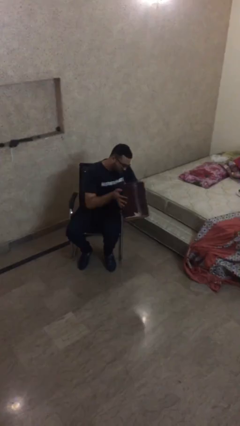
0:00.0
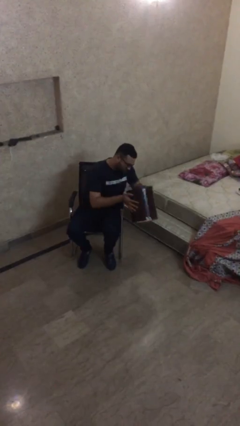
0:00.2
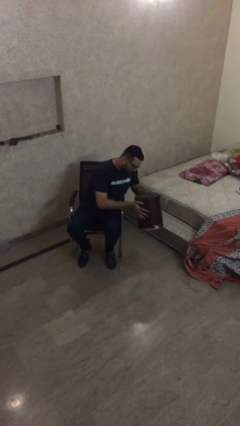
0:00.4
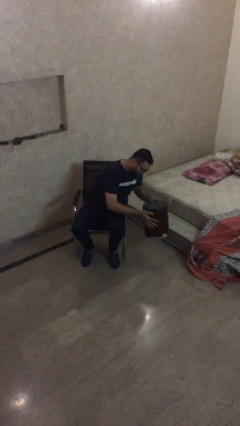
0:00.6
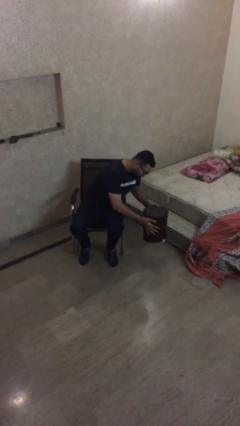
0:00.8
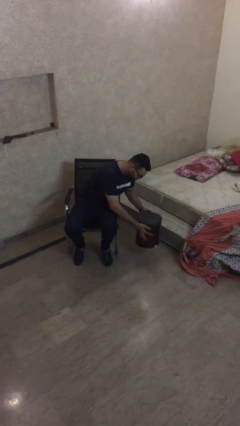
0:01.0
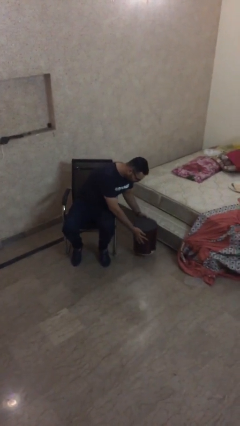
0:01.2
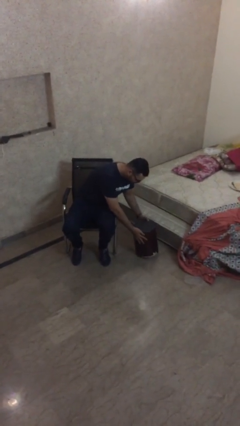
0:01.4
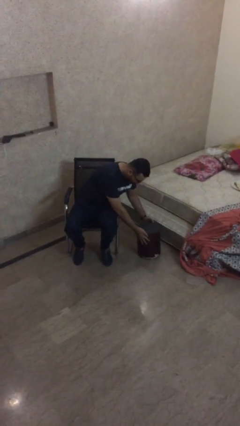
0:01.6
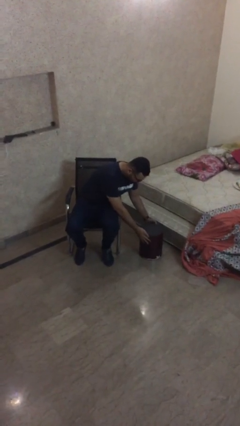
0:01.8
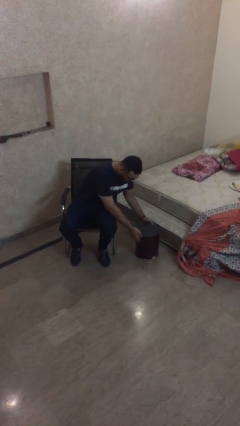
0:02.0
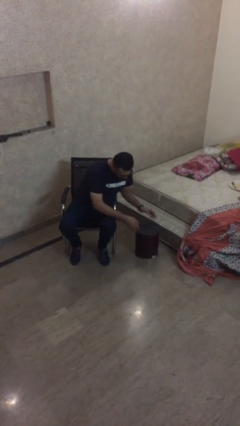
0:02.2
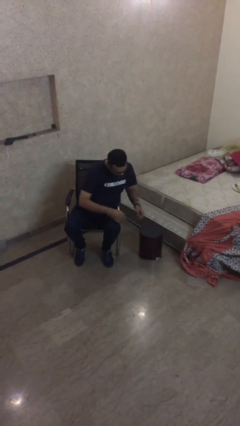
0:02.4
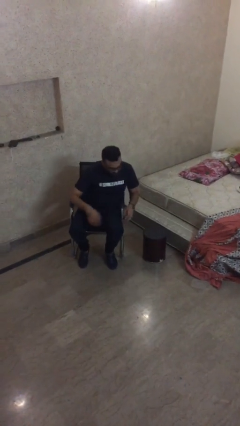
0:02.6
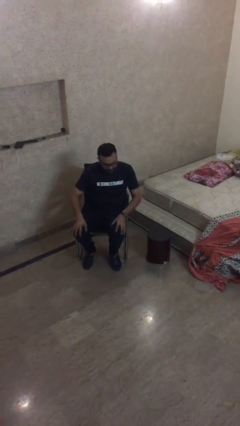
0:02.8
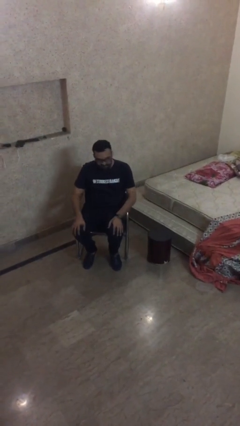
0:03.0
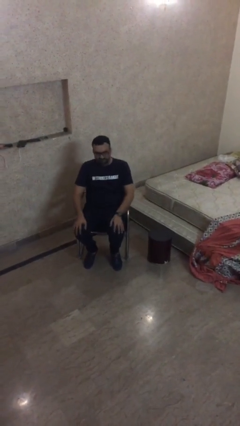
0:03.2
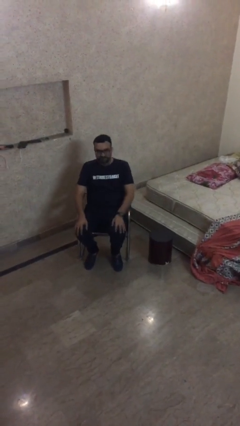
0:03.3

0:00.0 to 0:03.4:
person puts down object on floor

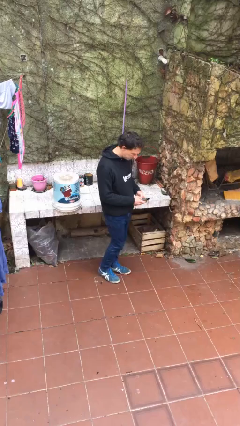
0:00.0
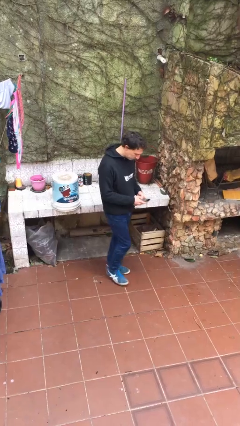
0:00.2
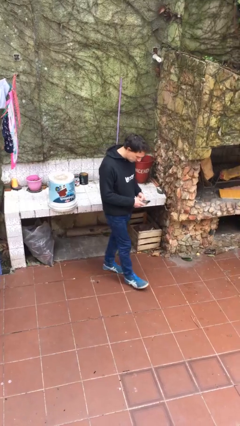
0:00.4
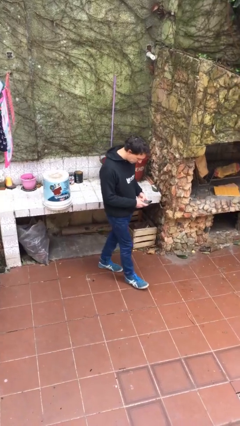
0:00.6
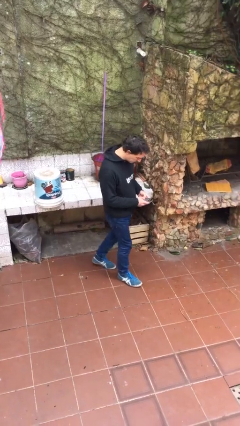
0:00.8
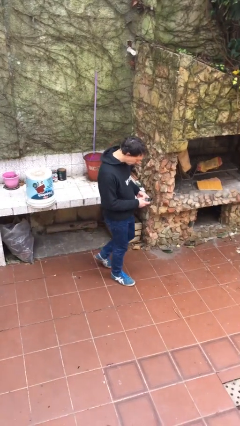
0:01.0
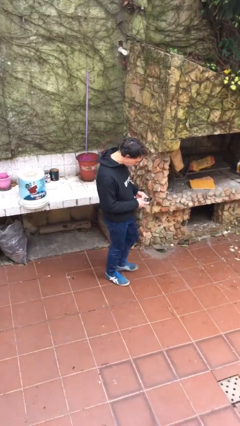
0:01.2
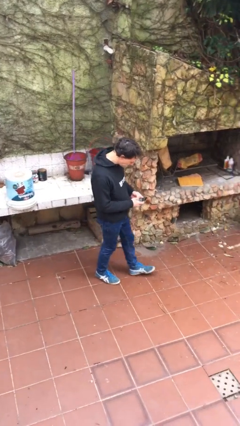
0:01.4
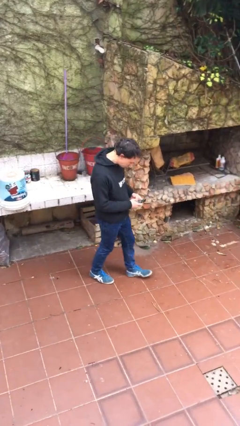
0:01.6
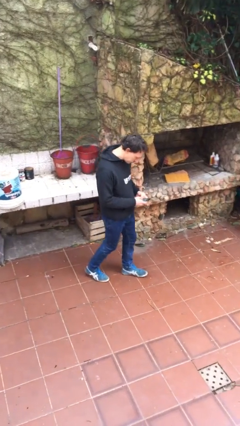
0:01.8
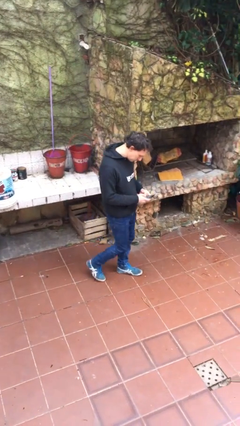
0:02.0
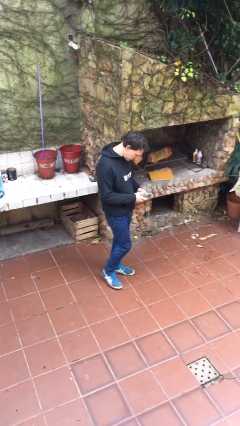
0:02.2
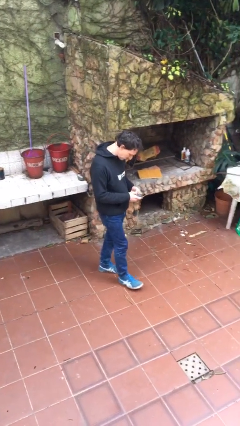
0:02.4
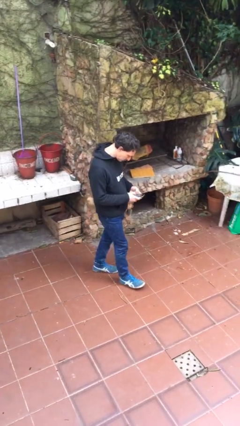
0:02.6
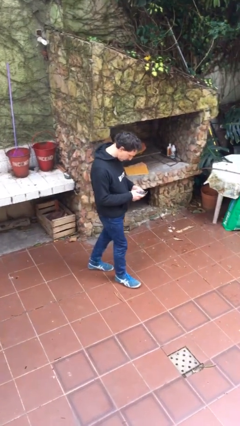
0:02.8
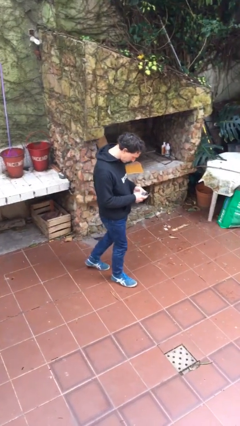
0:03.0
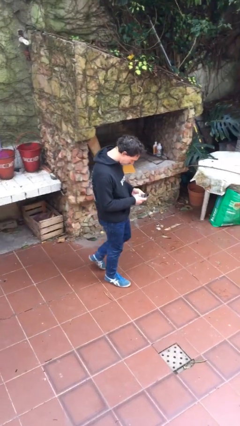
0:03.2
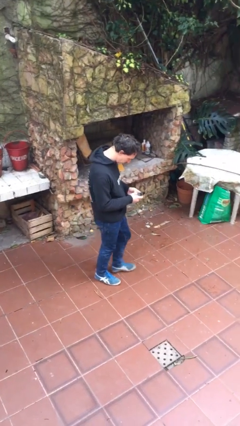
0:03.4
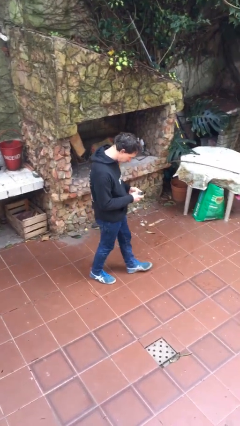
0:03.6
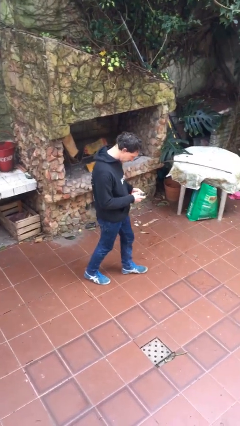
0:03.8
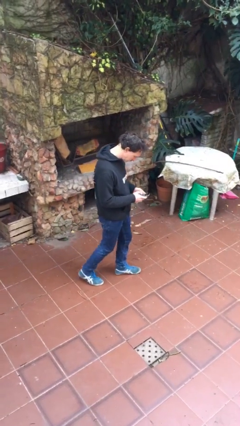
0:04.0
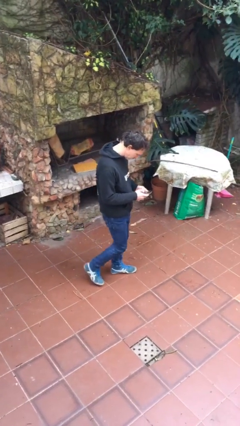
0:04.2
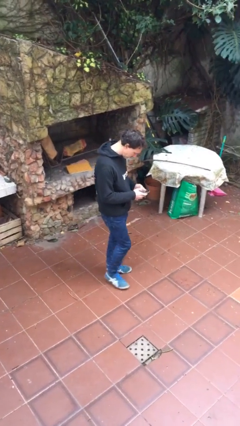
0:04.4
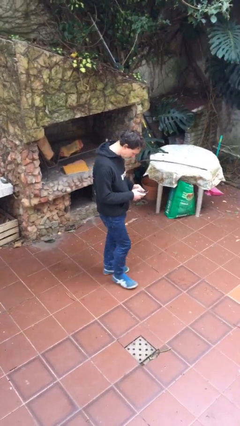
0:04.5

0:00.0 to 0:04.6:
person texts on phone

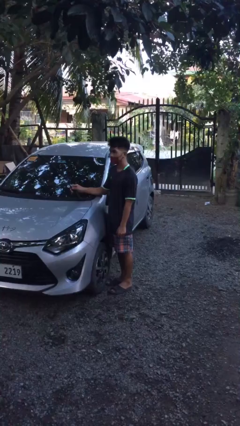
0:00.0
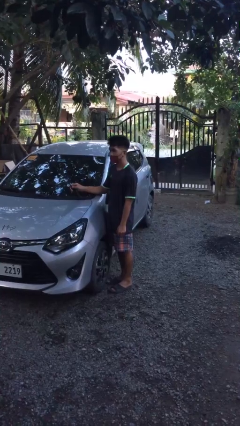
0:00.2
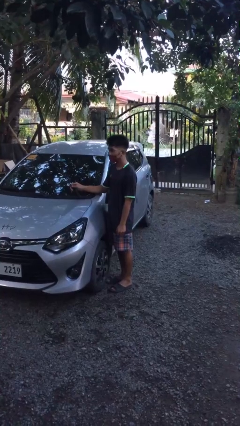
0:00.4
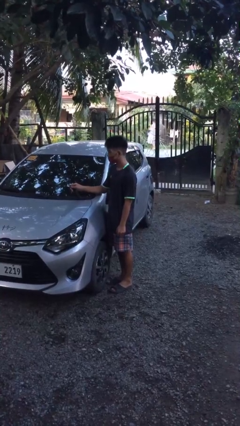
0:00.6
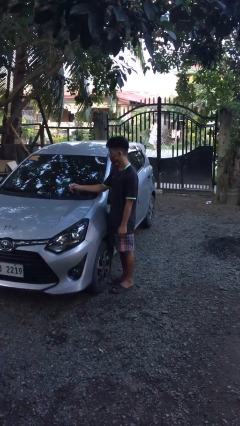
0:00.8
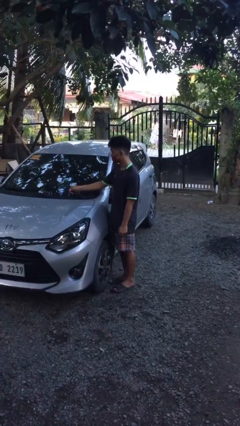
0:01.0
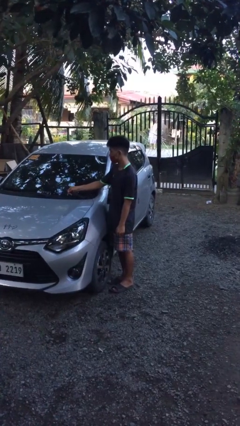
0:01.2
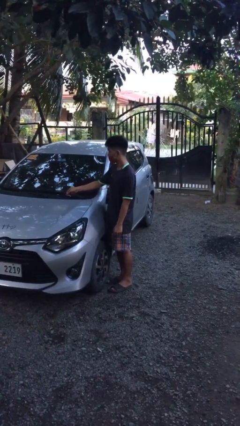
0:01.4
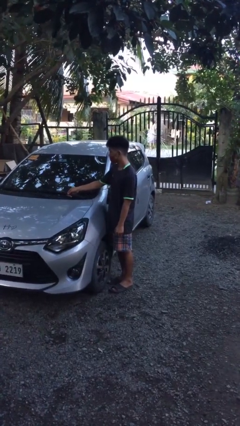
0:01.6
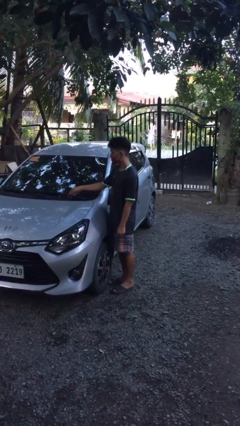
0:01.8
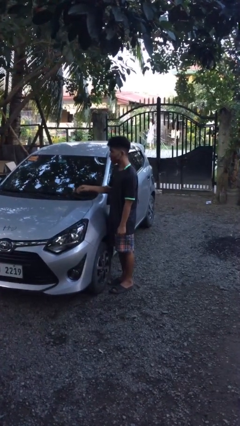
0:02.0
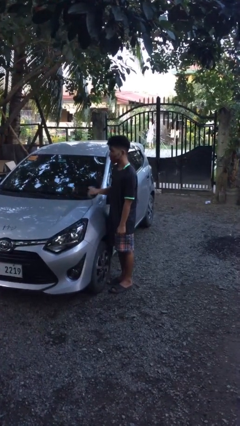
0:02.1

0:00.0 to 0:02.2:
person flips down car wipers

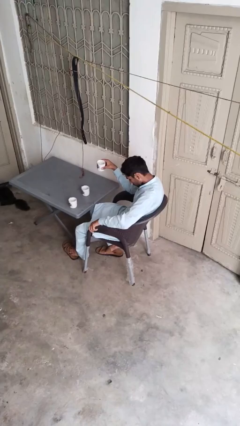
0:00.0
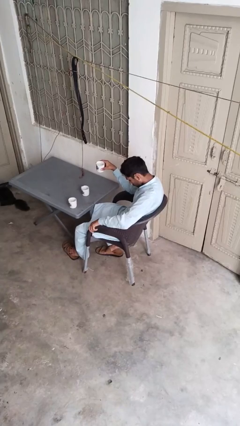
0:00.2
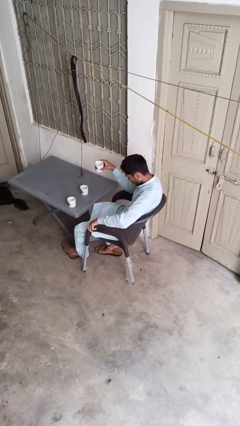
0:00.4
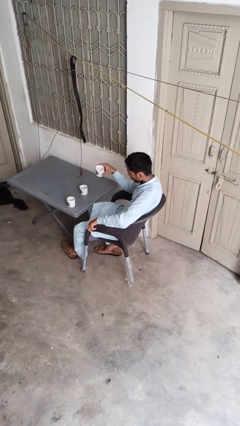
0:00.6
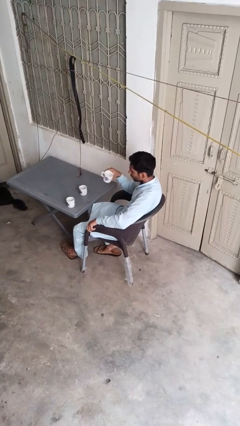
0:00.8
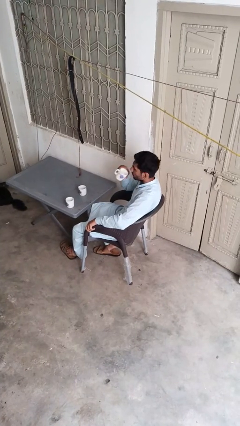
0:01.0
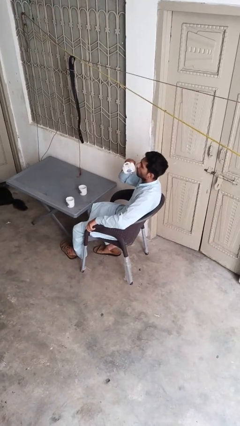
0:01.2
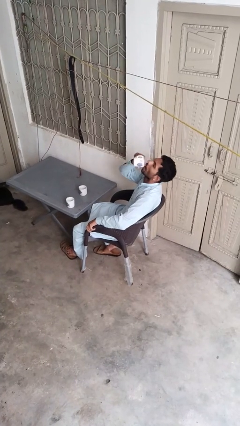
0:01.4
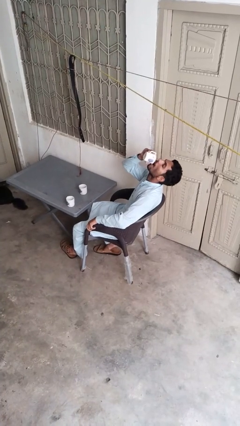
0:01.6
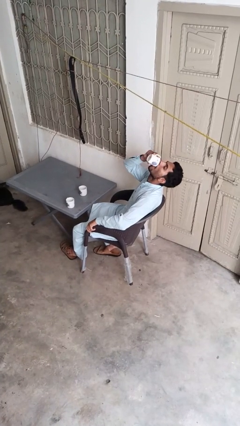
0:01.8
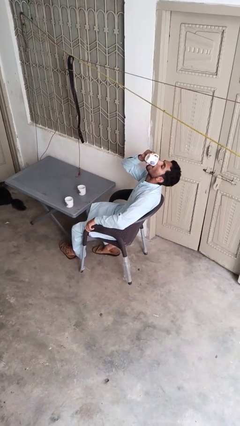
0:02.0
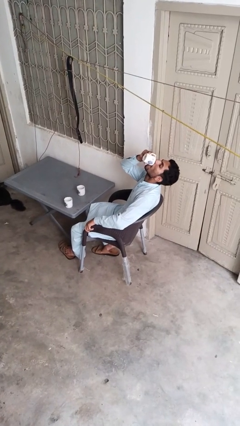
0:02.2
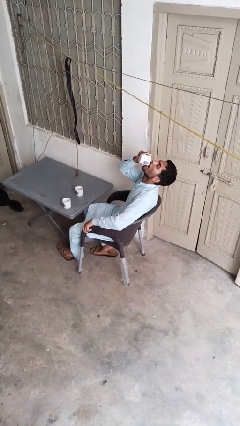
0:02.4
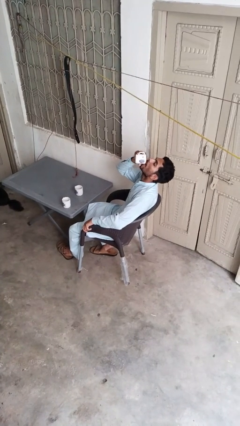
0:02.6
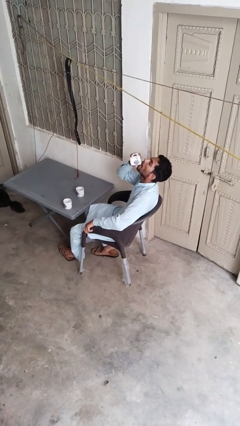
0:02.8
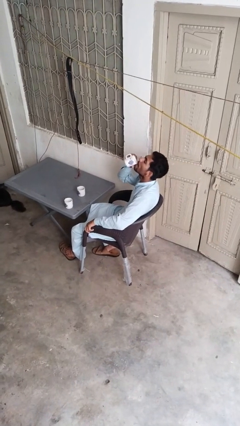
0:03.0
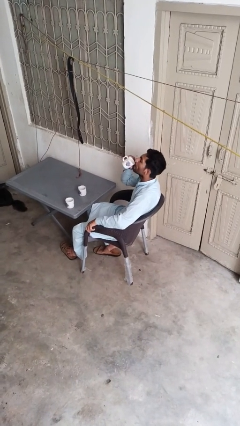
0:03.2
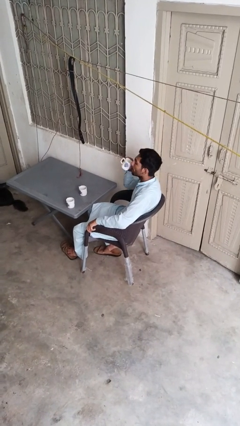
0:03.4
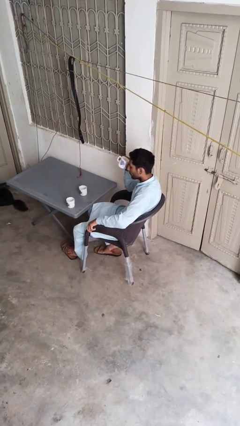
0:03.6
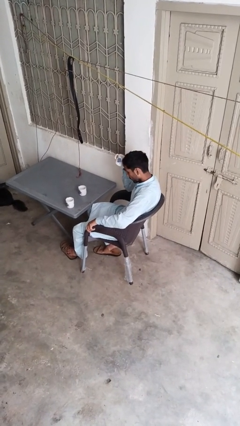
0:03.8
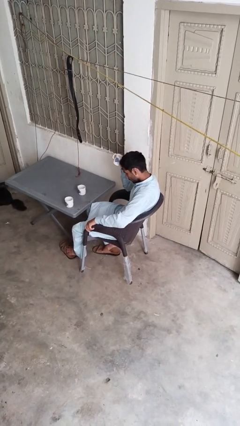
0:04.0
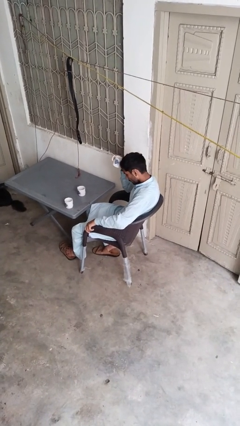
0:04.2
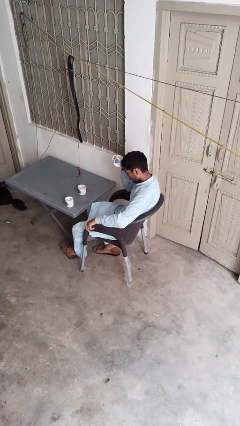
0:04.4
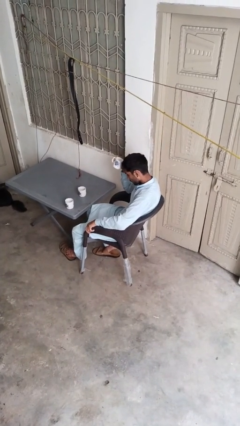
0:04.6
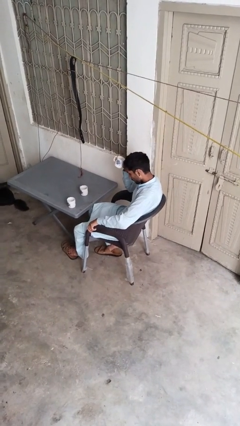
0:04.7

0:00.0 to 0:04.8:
person drinks from shotglass

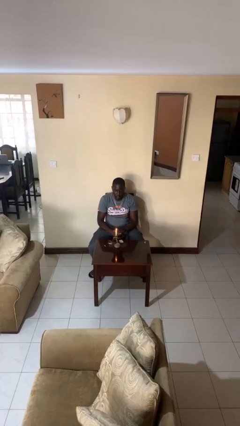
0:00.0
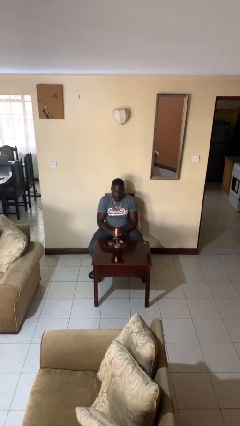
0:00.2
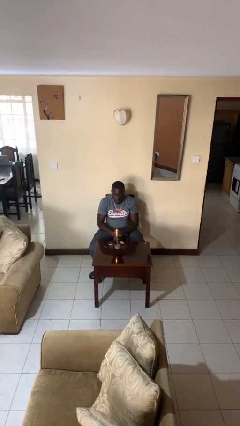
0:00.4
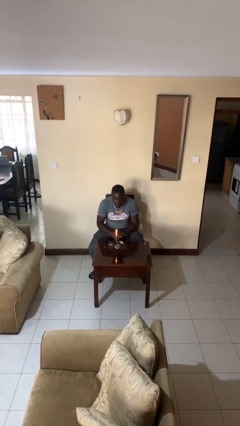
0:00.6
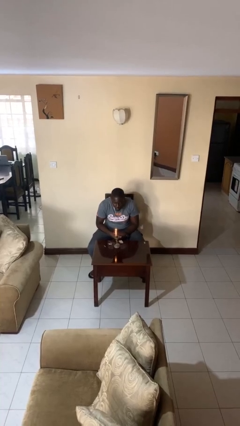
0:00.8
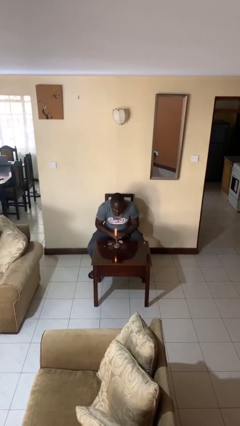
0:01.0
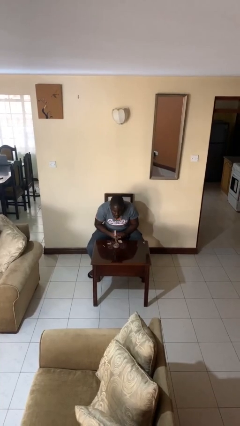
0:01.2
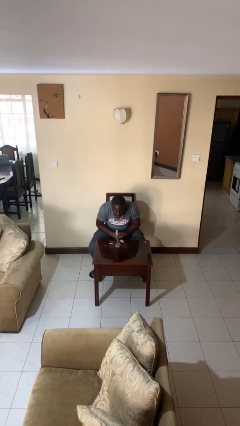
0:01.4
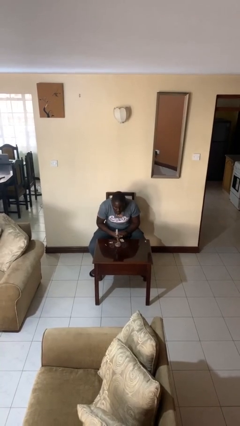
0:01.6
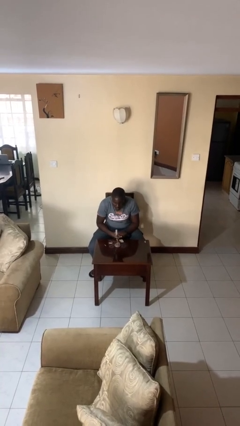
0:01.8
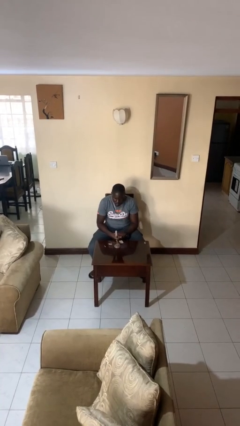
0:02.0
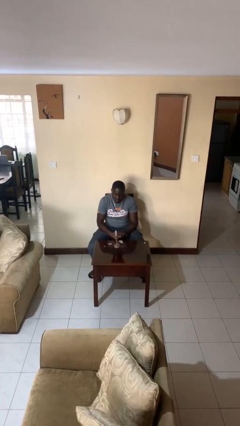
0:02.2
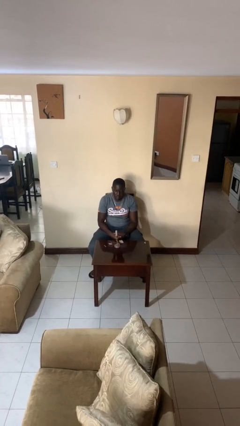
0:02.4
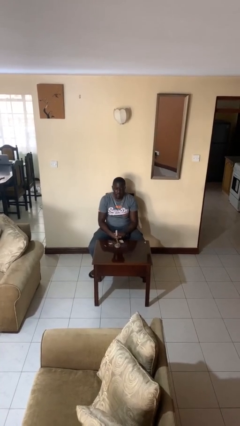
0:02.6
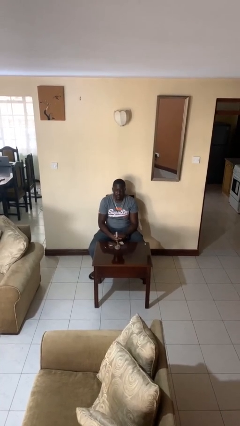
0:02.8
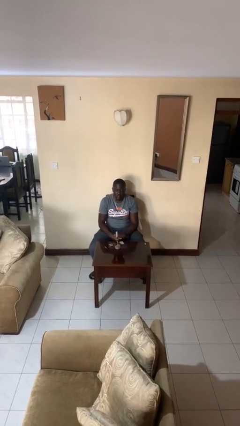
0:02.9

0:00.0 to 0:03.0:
person extinguishes candle
